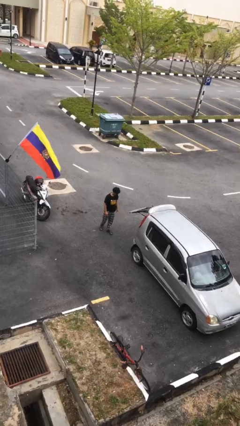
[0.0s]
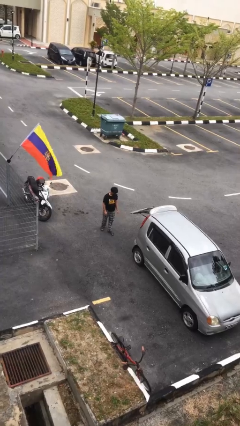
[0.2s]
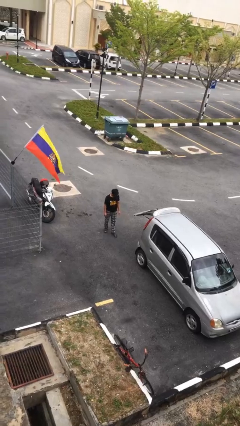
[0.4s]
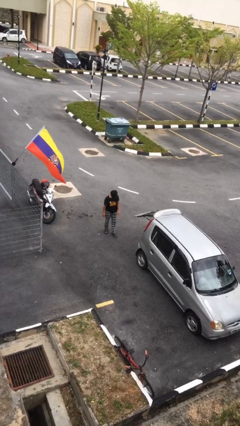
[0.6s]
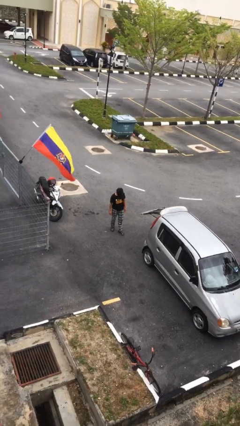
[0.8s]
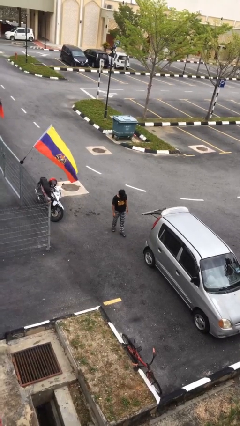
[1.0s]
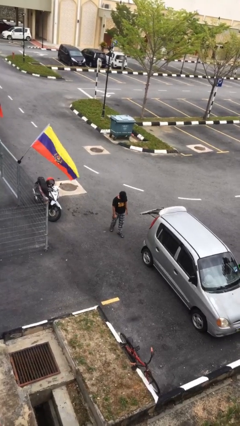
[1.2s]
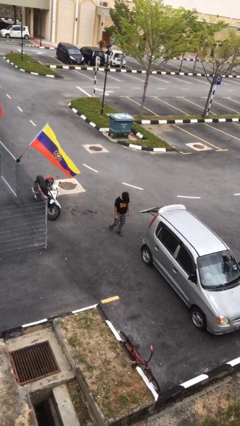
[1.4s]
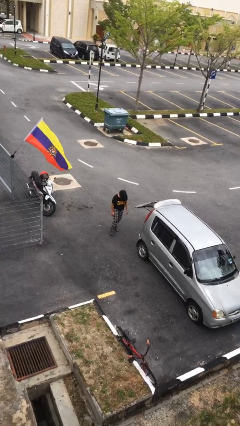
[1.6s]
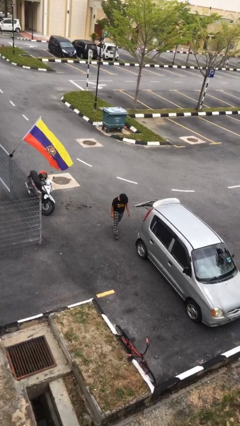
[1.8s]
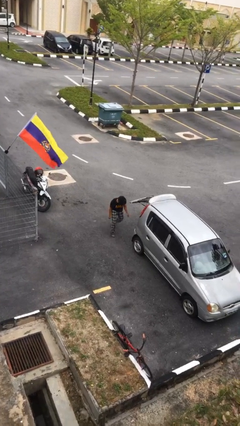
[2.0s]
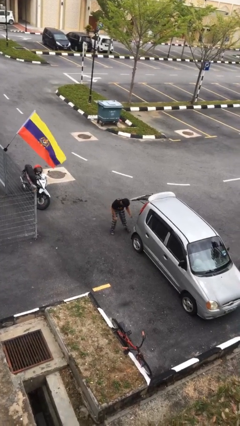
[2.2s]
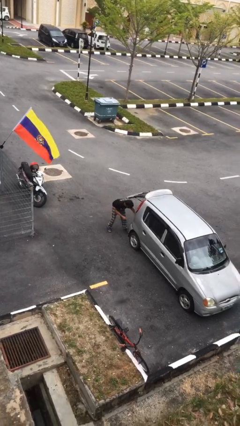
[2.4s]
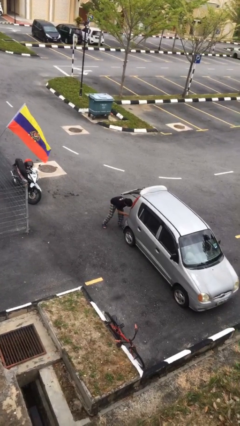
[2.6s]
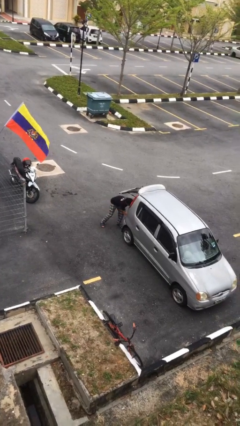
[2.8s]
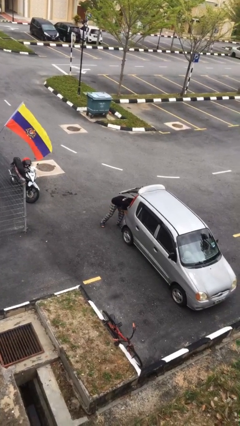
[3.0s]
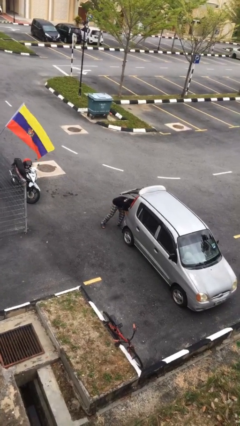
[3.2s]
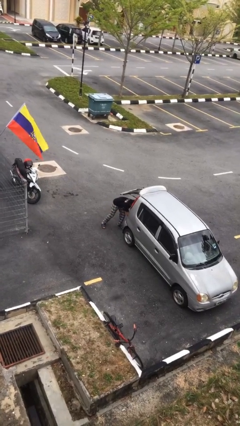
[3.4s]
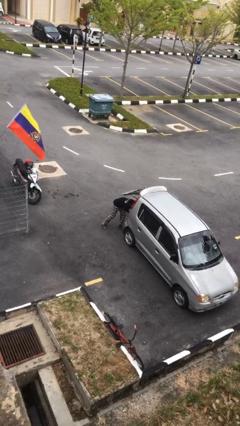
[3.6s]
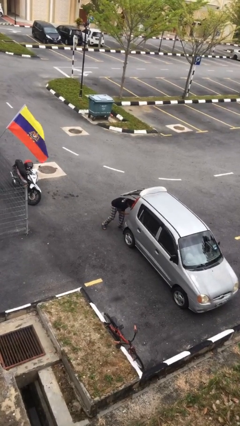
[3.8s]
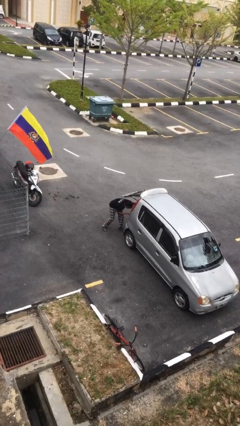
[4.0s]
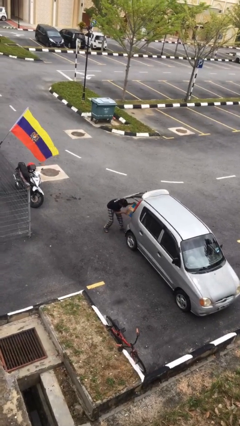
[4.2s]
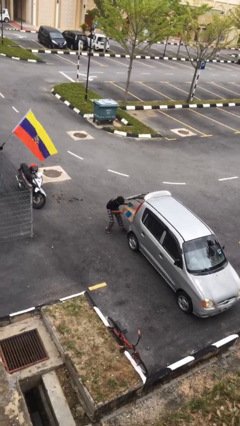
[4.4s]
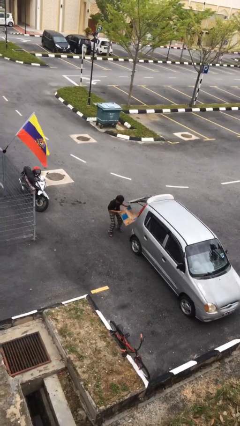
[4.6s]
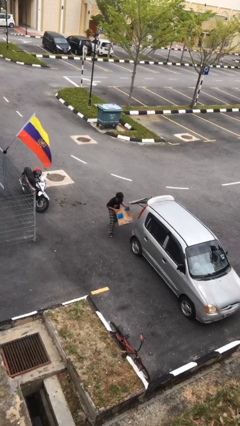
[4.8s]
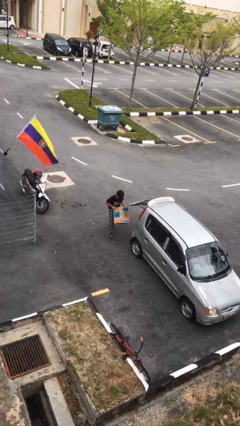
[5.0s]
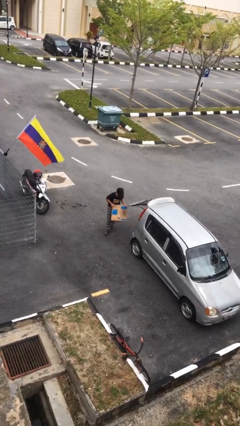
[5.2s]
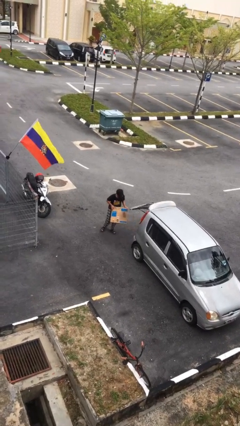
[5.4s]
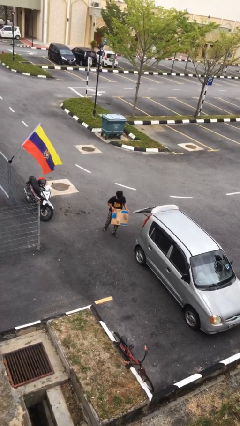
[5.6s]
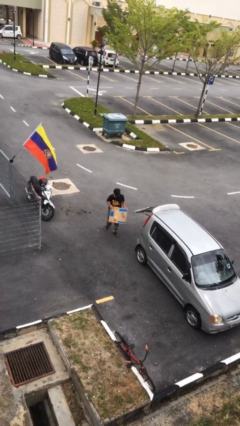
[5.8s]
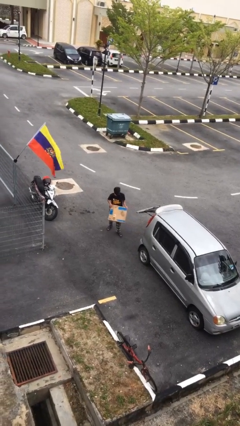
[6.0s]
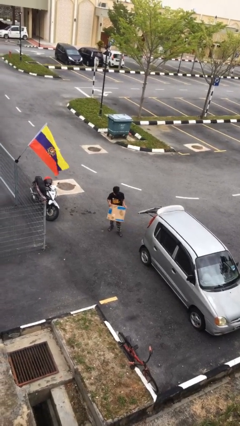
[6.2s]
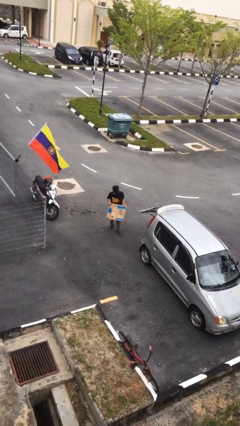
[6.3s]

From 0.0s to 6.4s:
person unloads car

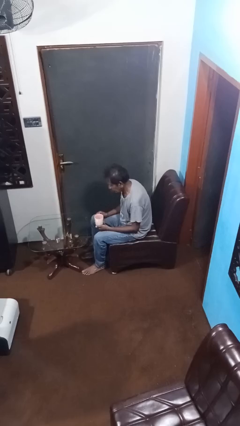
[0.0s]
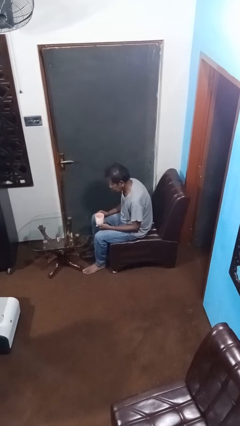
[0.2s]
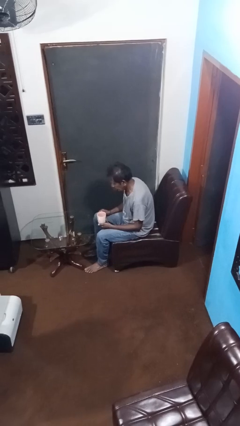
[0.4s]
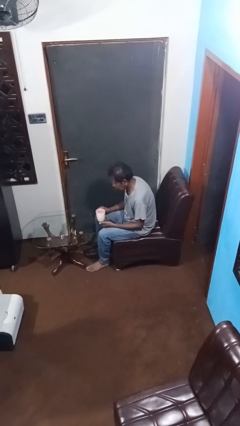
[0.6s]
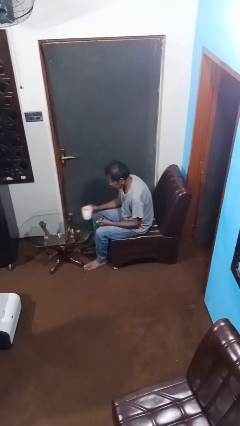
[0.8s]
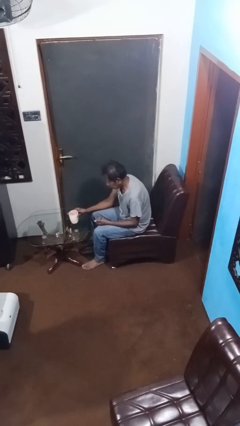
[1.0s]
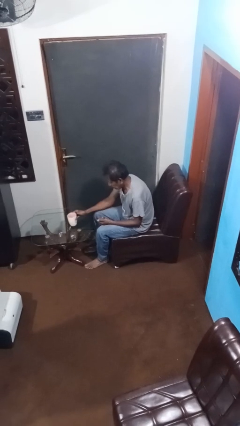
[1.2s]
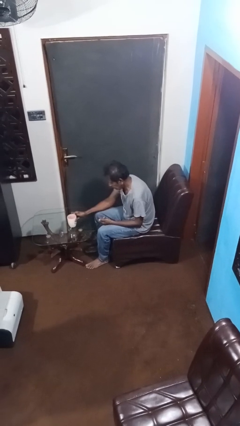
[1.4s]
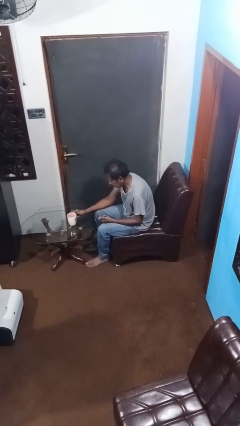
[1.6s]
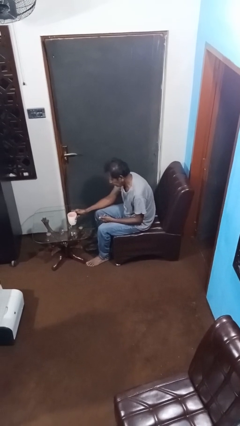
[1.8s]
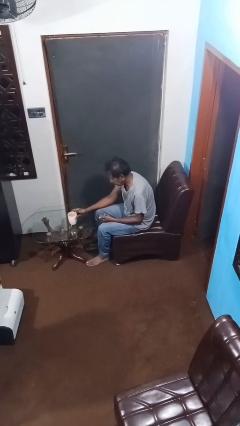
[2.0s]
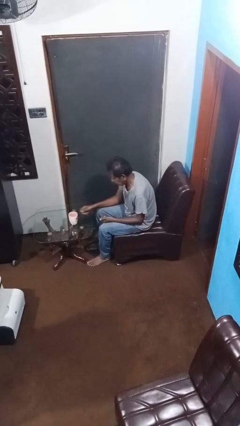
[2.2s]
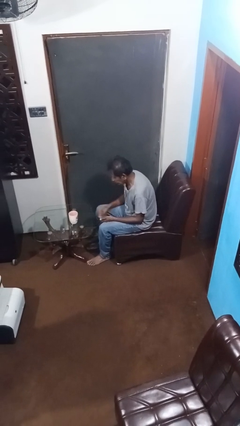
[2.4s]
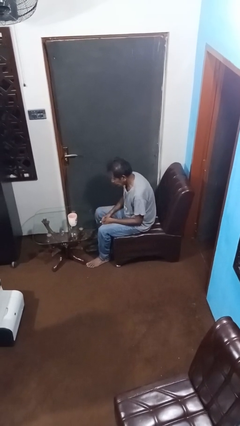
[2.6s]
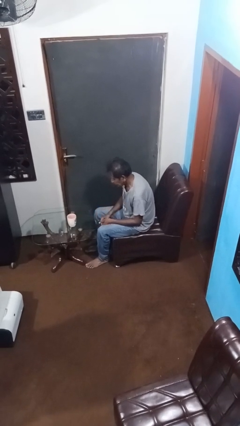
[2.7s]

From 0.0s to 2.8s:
person puts down object on table

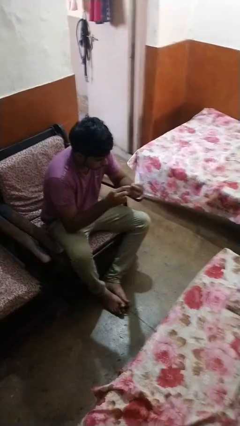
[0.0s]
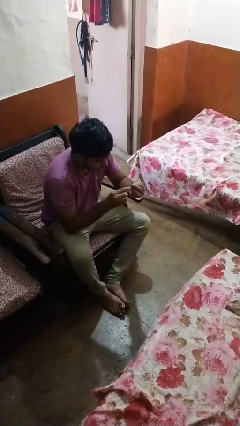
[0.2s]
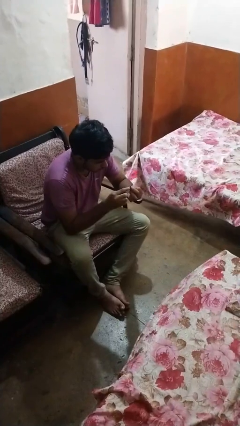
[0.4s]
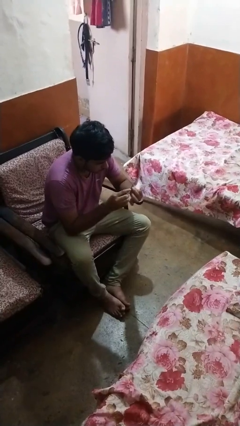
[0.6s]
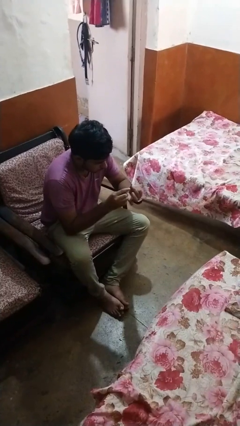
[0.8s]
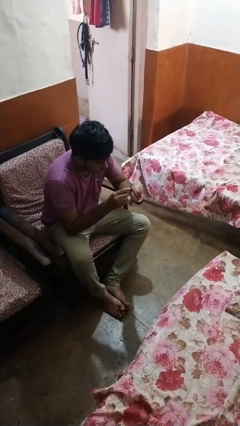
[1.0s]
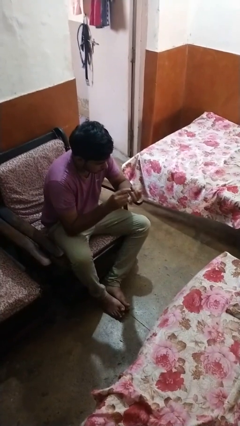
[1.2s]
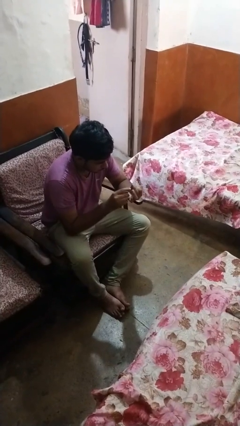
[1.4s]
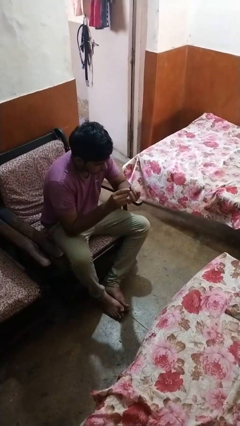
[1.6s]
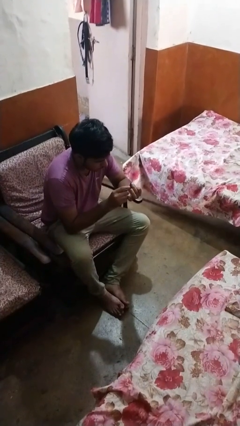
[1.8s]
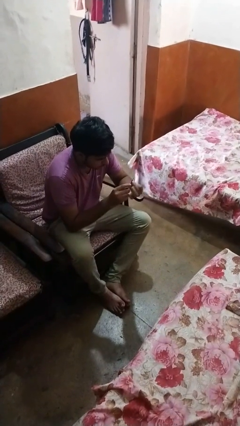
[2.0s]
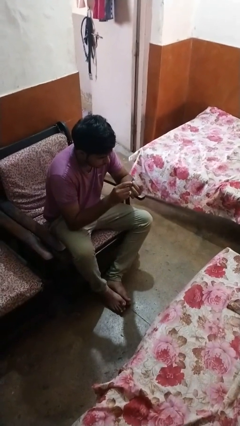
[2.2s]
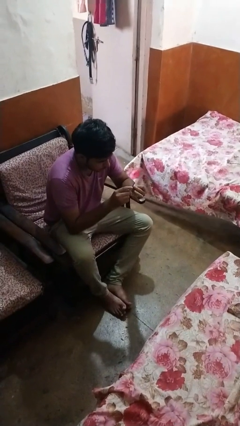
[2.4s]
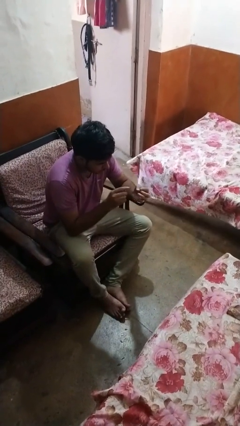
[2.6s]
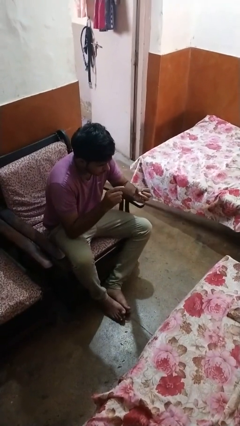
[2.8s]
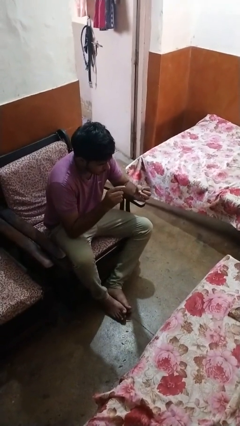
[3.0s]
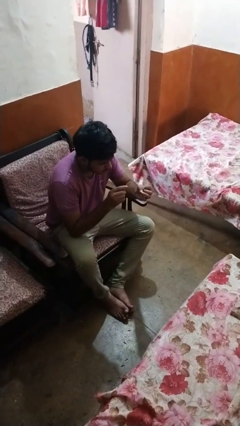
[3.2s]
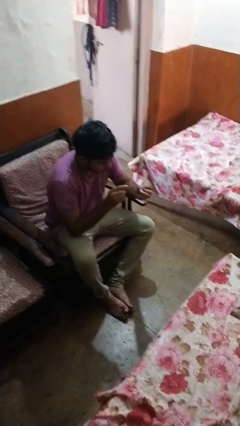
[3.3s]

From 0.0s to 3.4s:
person files fingernails

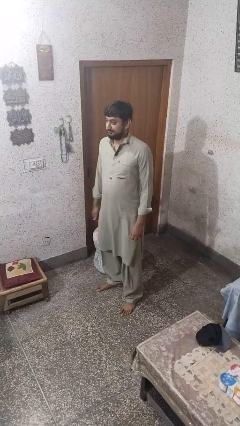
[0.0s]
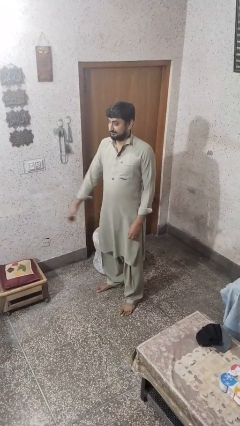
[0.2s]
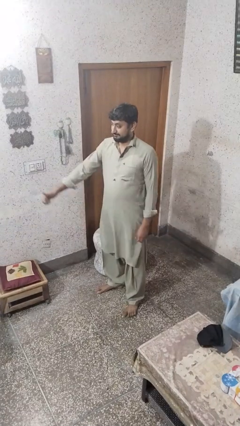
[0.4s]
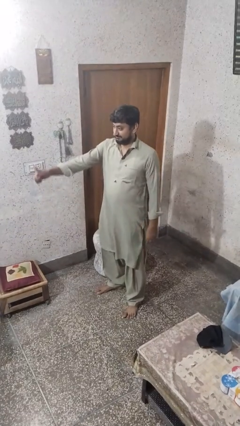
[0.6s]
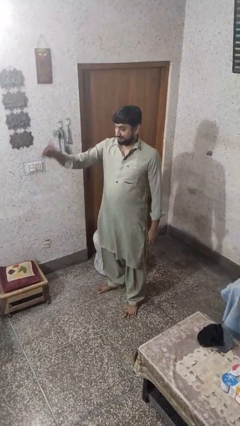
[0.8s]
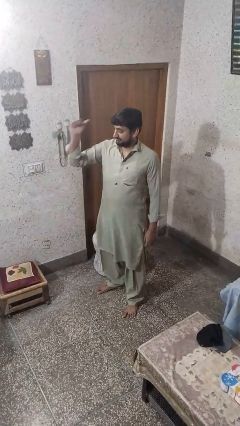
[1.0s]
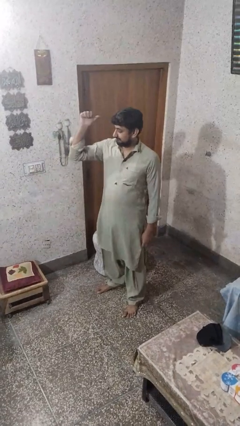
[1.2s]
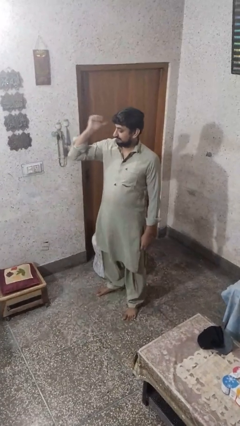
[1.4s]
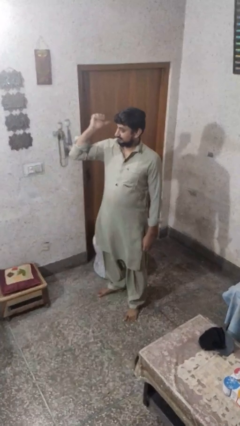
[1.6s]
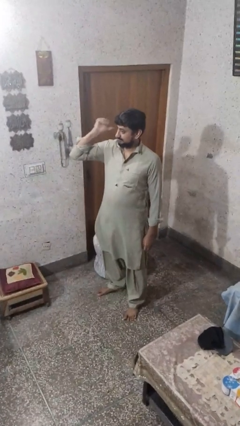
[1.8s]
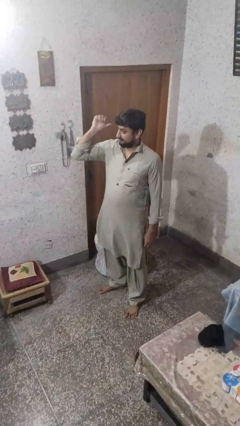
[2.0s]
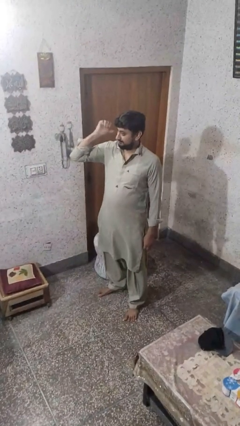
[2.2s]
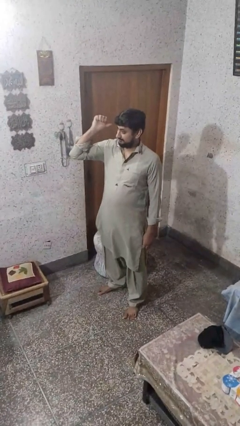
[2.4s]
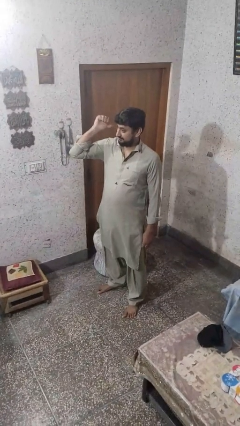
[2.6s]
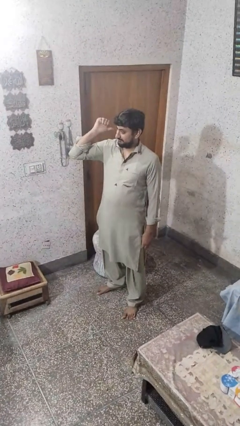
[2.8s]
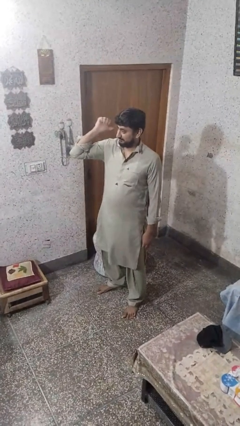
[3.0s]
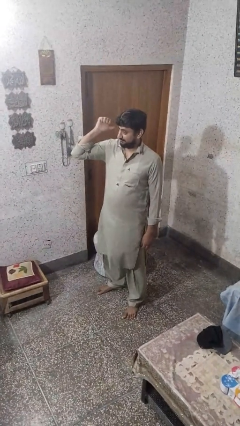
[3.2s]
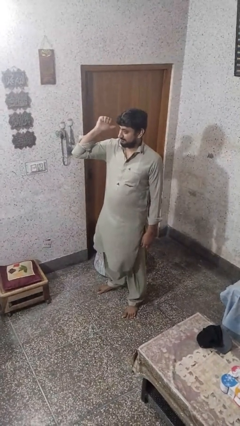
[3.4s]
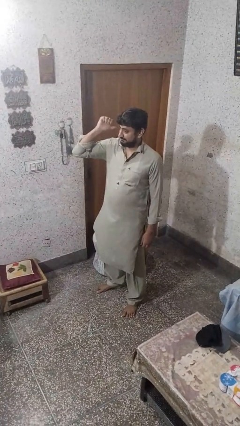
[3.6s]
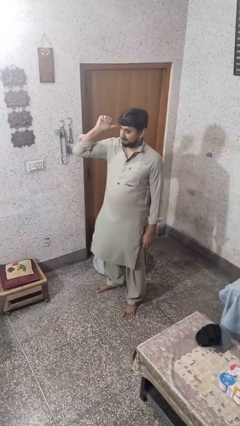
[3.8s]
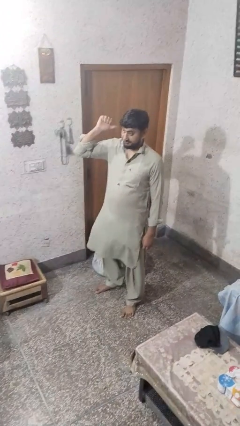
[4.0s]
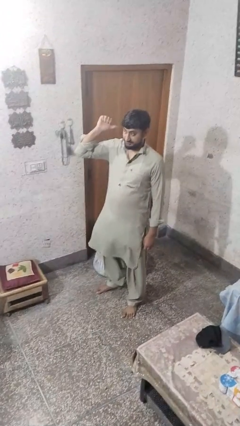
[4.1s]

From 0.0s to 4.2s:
person gestures behind me

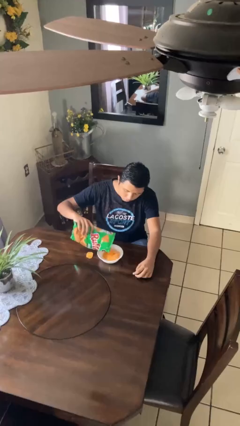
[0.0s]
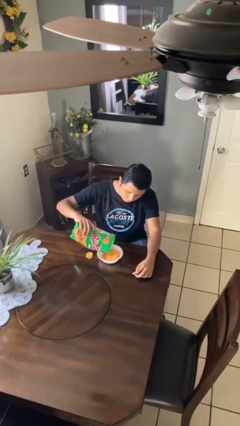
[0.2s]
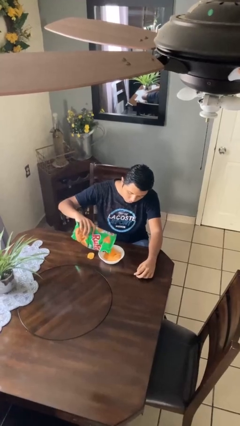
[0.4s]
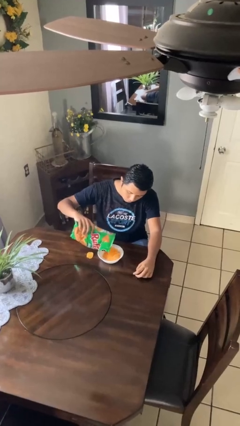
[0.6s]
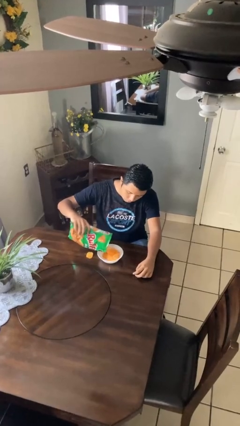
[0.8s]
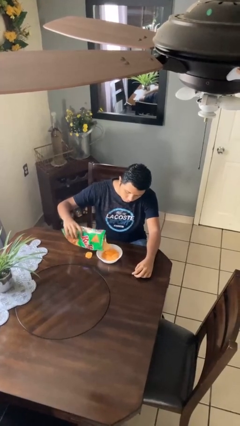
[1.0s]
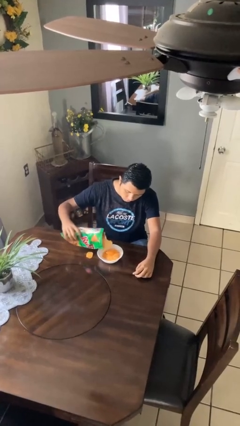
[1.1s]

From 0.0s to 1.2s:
person pours into bowl
